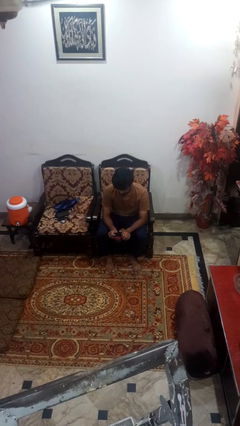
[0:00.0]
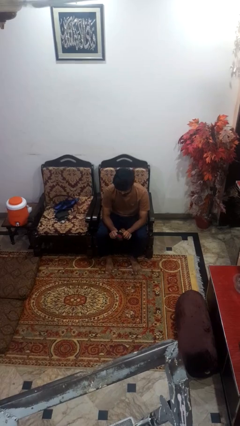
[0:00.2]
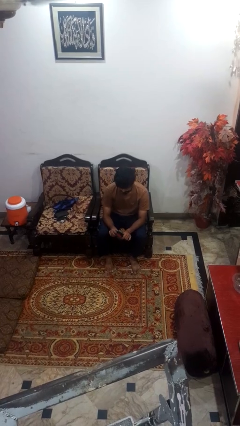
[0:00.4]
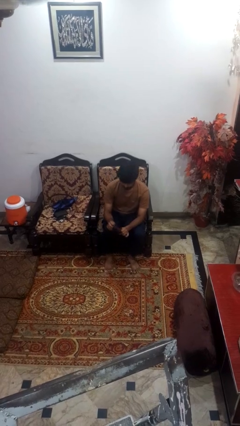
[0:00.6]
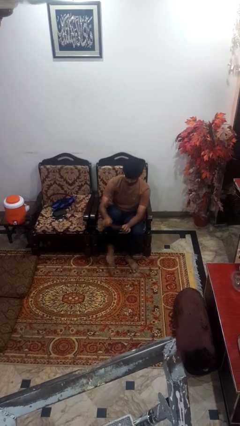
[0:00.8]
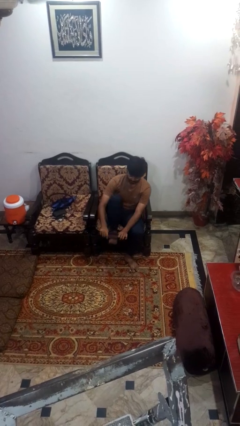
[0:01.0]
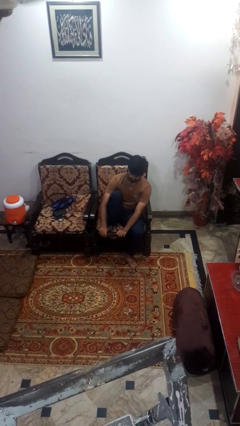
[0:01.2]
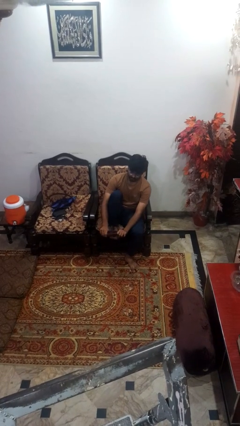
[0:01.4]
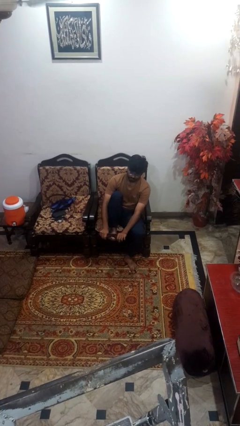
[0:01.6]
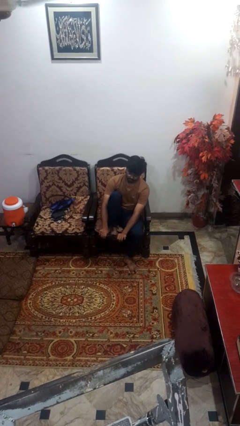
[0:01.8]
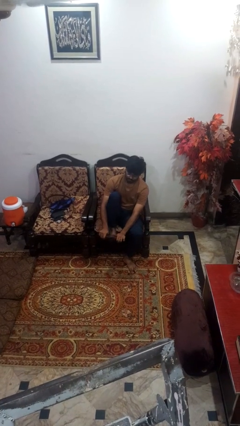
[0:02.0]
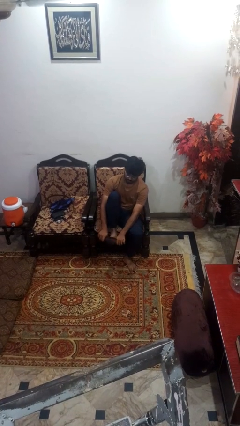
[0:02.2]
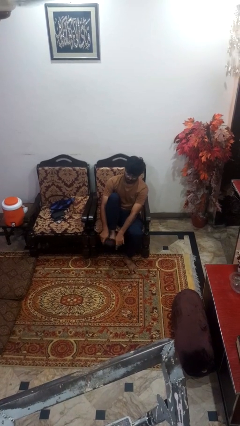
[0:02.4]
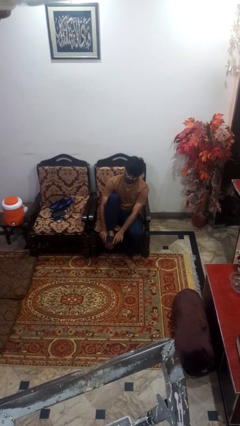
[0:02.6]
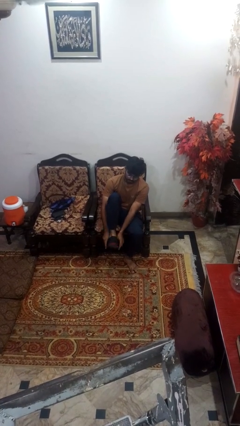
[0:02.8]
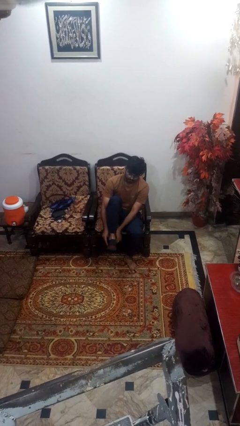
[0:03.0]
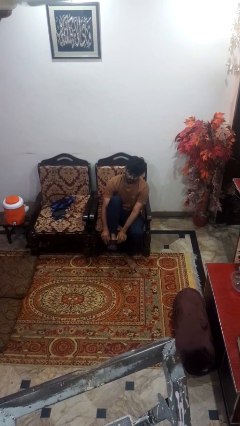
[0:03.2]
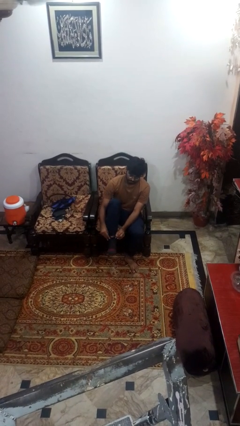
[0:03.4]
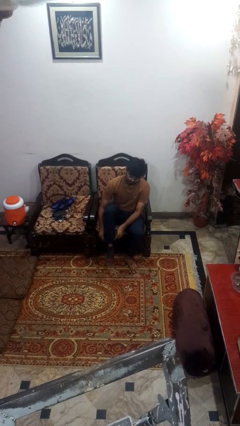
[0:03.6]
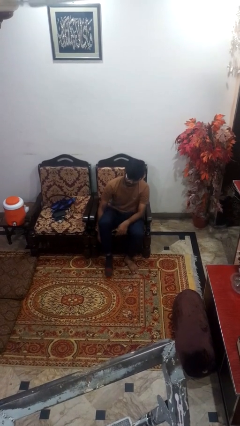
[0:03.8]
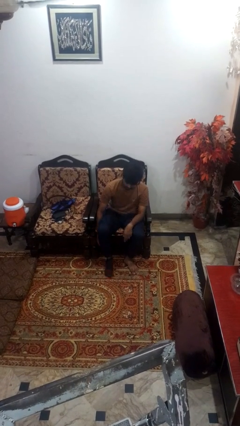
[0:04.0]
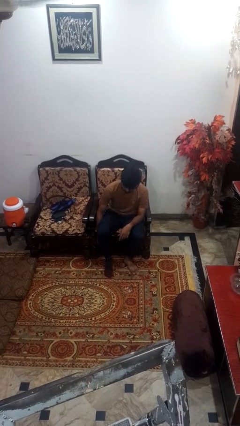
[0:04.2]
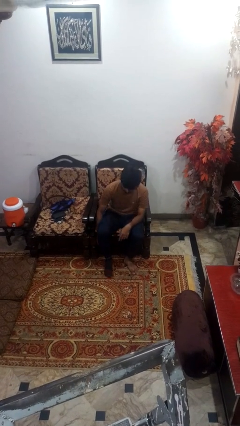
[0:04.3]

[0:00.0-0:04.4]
person puts on socks

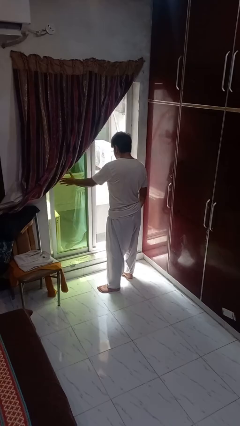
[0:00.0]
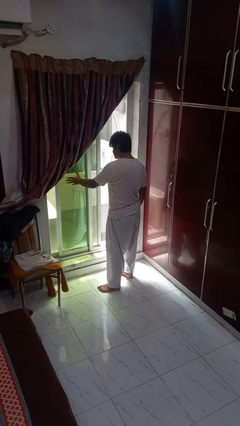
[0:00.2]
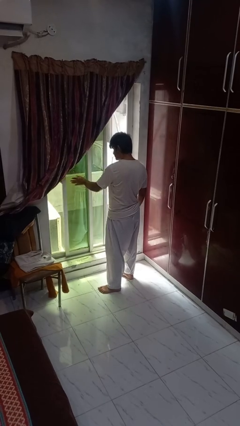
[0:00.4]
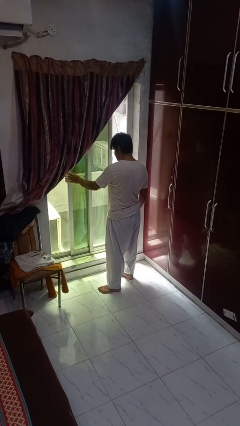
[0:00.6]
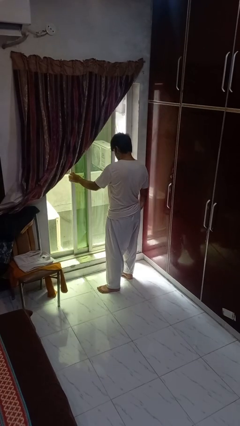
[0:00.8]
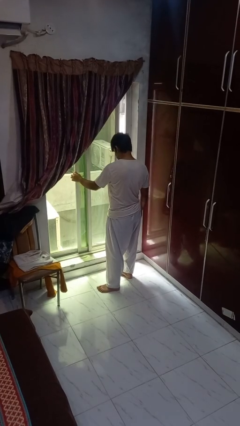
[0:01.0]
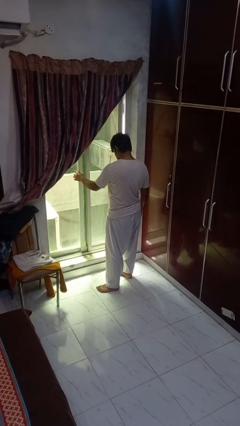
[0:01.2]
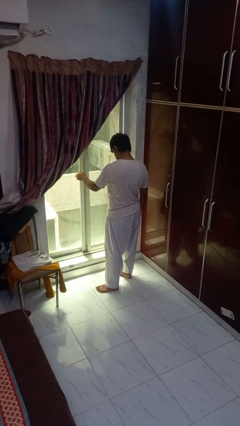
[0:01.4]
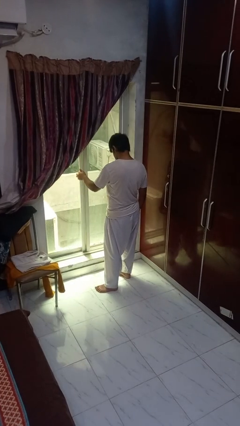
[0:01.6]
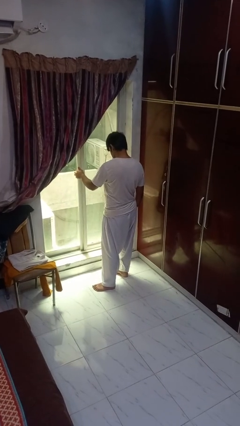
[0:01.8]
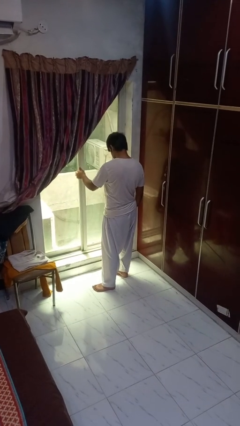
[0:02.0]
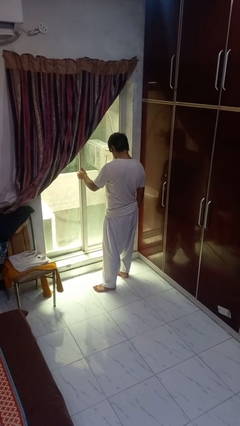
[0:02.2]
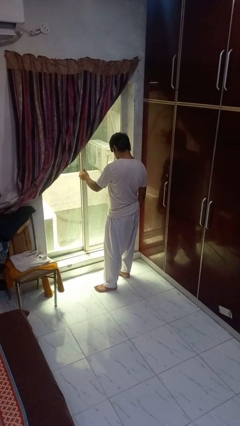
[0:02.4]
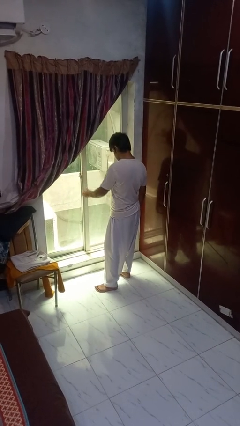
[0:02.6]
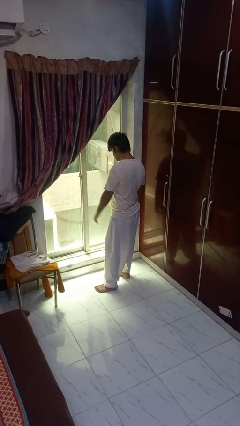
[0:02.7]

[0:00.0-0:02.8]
person closes home window

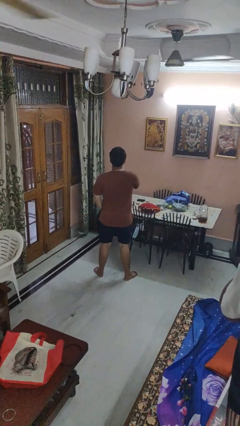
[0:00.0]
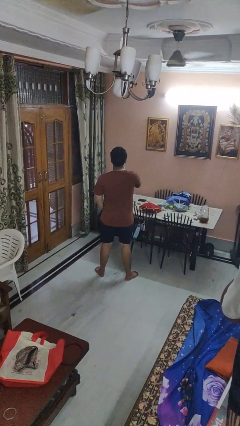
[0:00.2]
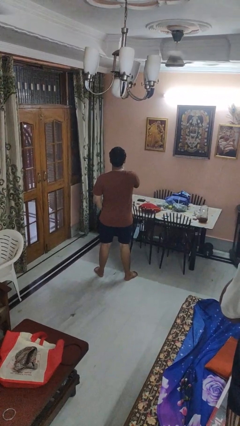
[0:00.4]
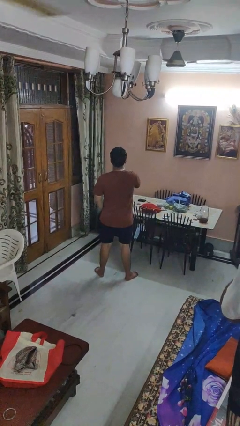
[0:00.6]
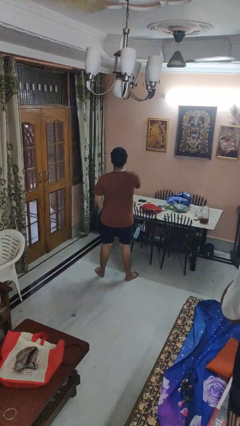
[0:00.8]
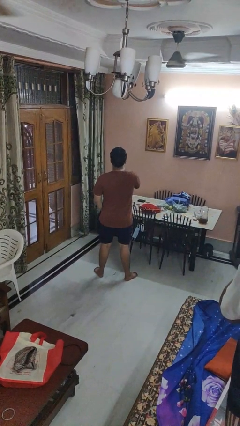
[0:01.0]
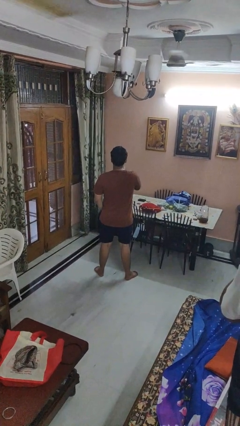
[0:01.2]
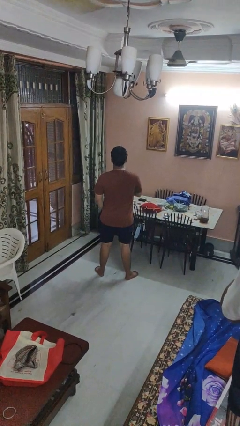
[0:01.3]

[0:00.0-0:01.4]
person gestures be quiet

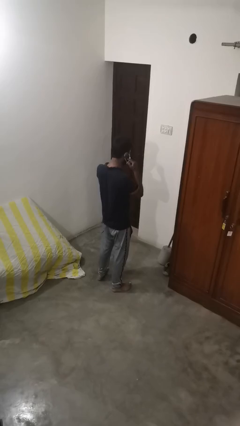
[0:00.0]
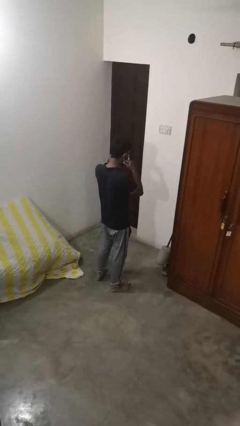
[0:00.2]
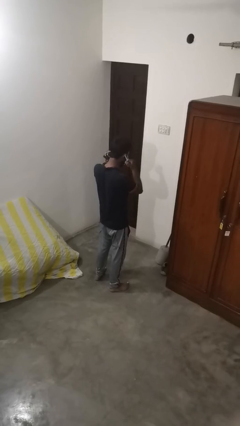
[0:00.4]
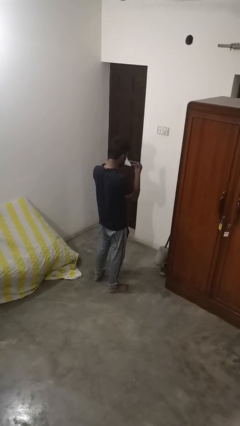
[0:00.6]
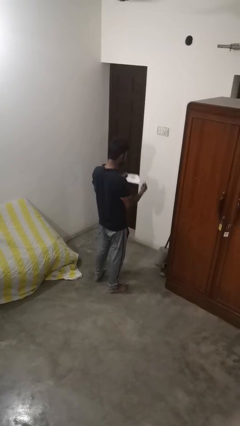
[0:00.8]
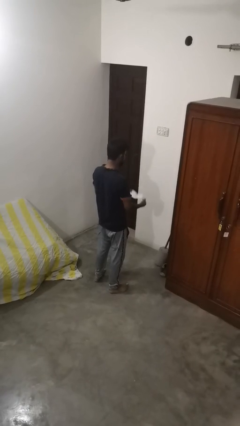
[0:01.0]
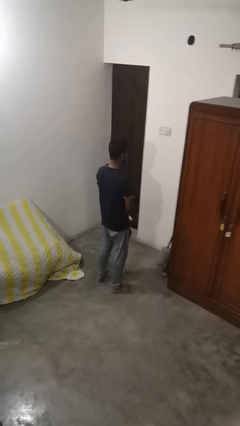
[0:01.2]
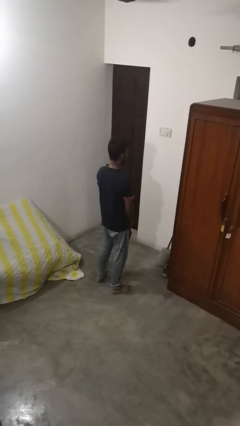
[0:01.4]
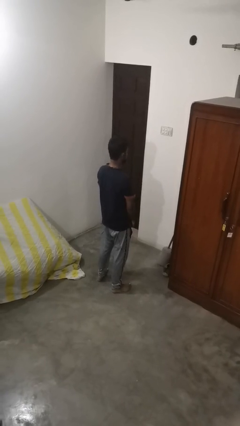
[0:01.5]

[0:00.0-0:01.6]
person takes off facemask

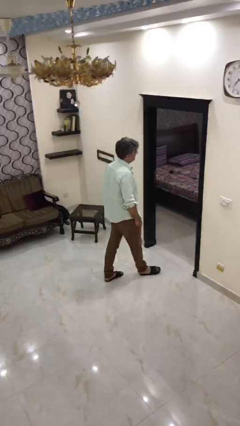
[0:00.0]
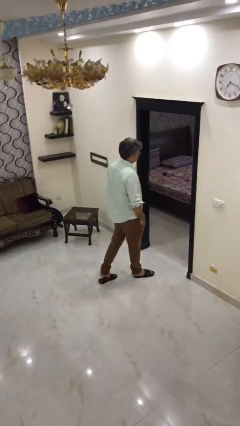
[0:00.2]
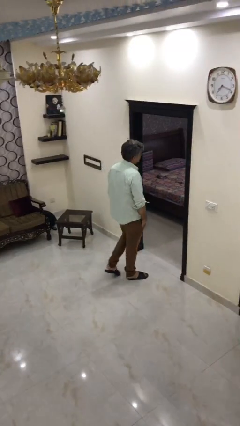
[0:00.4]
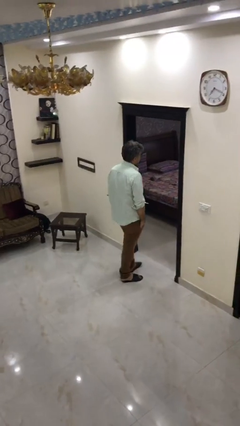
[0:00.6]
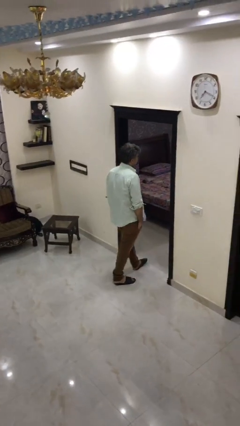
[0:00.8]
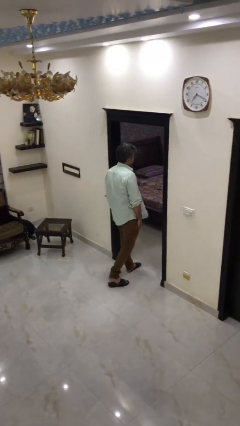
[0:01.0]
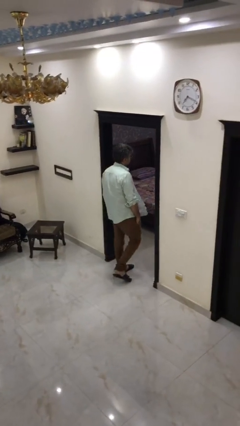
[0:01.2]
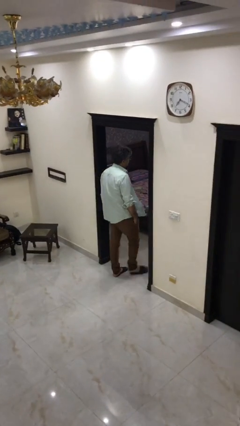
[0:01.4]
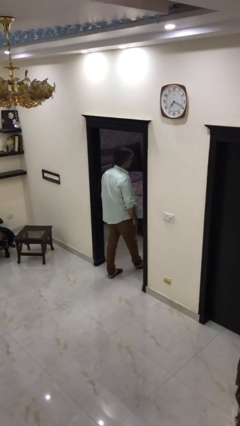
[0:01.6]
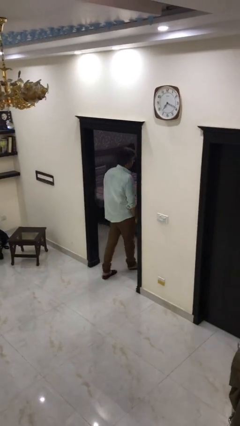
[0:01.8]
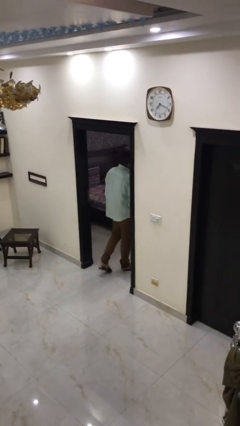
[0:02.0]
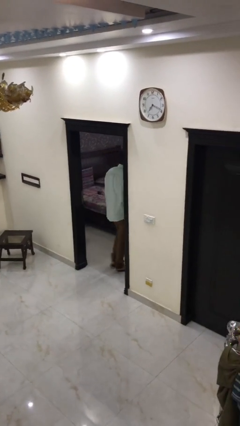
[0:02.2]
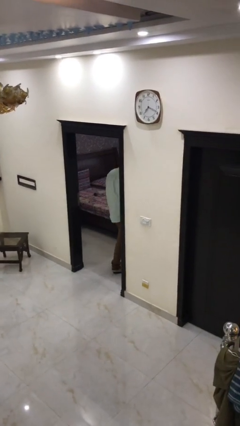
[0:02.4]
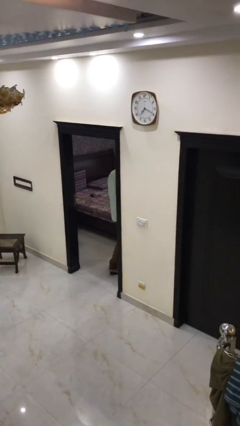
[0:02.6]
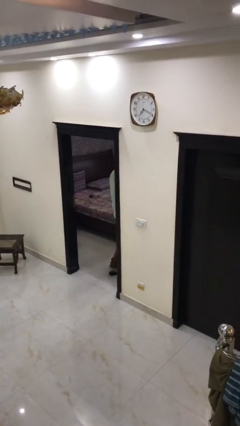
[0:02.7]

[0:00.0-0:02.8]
person exits scene through structure

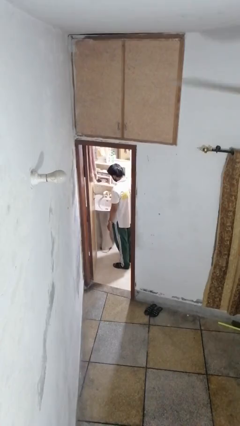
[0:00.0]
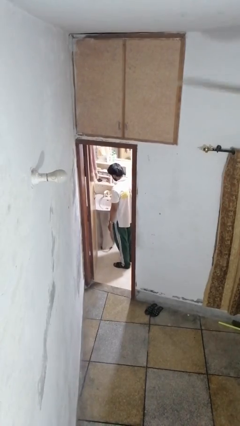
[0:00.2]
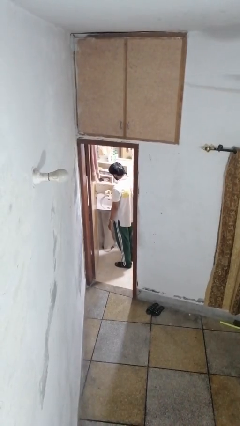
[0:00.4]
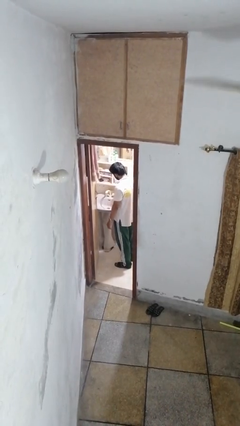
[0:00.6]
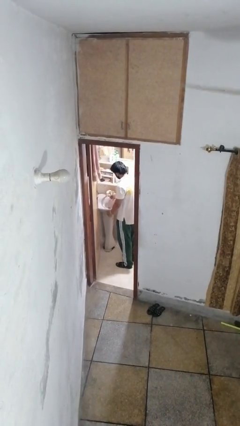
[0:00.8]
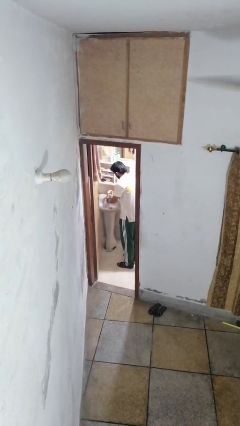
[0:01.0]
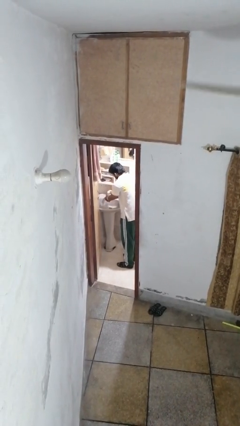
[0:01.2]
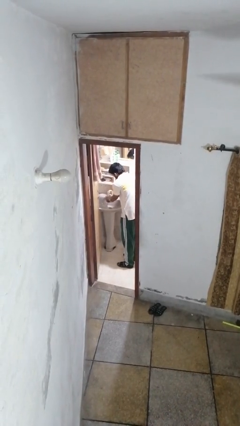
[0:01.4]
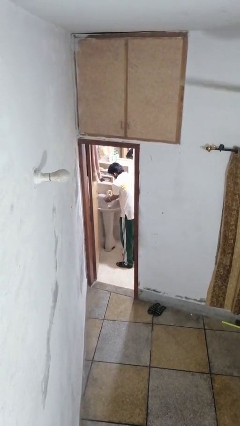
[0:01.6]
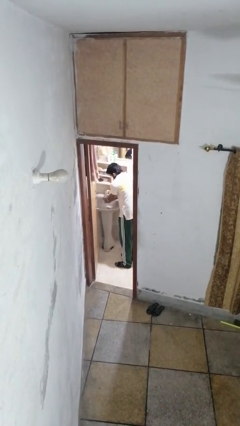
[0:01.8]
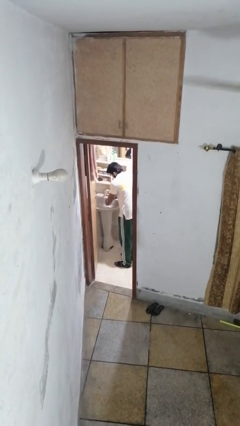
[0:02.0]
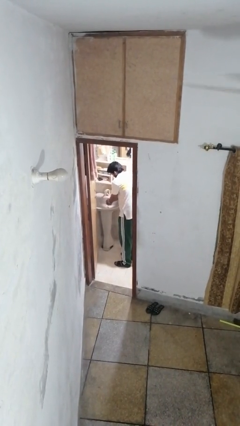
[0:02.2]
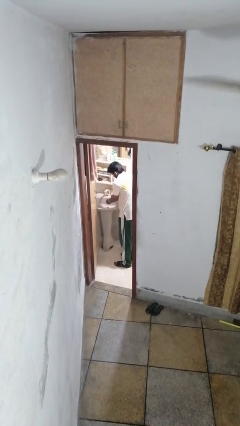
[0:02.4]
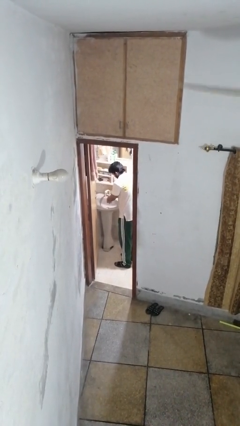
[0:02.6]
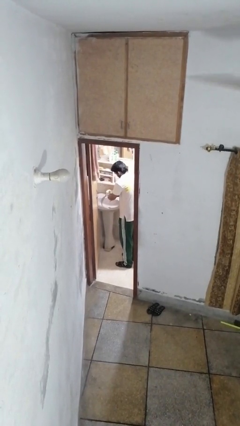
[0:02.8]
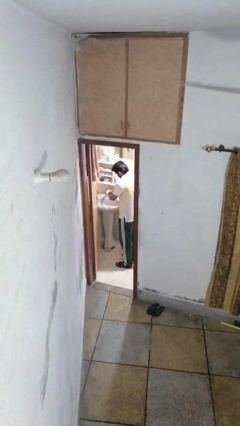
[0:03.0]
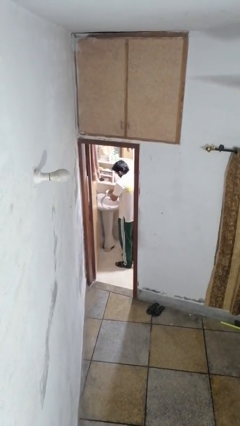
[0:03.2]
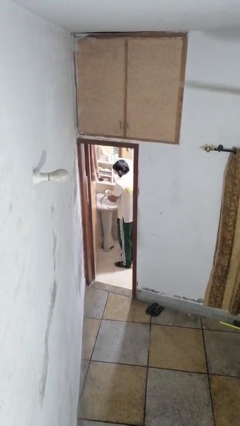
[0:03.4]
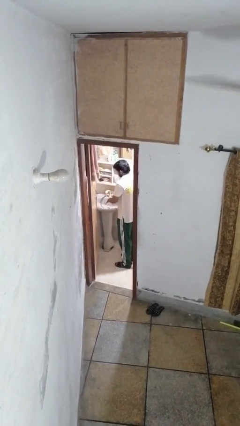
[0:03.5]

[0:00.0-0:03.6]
person washes hands

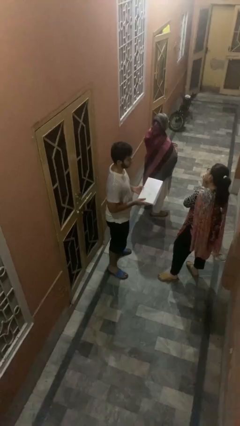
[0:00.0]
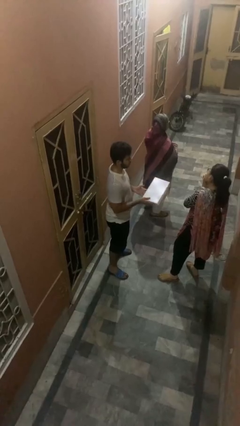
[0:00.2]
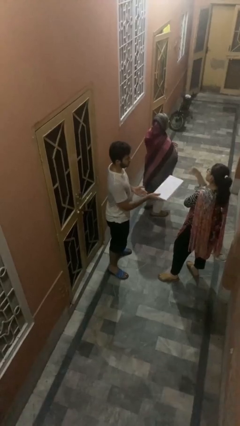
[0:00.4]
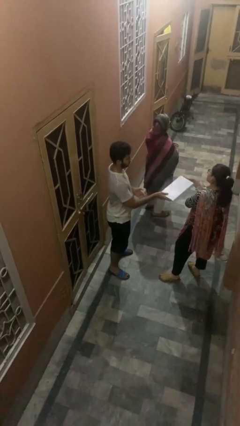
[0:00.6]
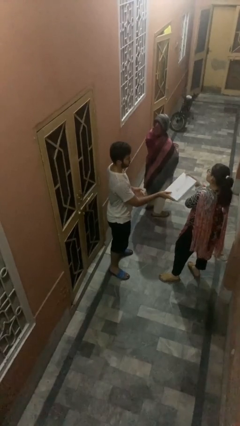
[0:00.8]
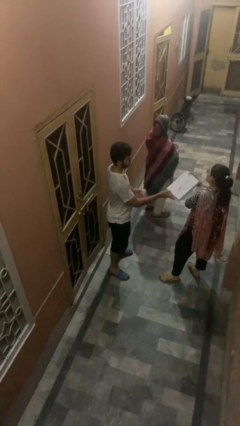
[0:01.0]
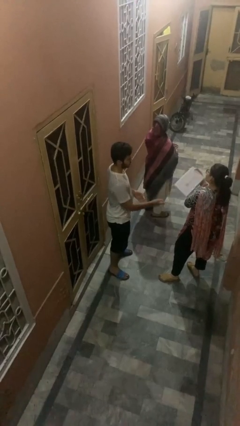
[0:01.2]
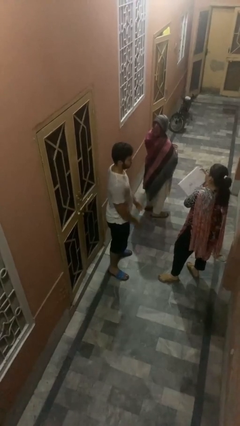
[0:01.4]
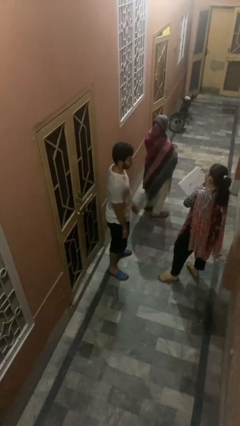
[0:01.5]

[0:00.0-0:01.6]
person transfers object to person
